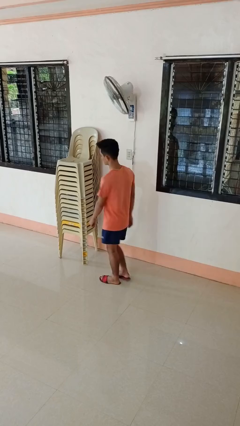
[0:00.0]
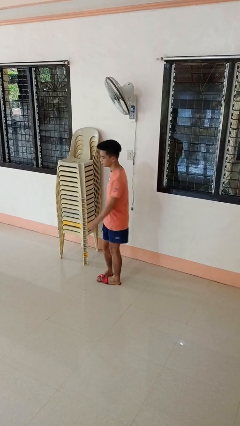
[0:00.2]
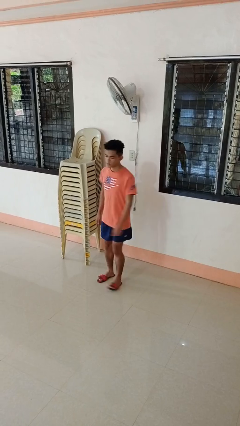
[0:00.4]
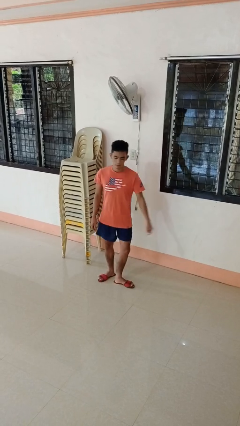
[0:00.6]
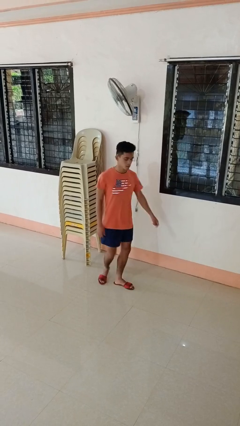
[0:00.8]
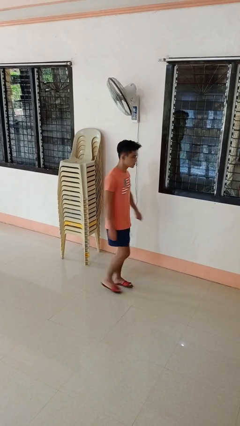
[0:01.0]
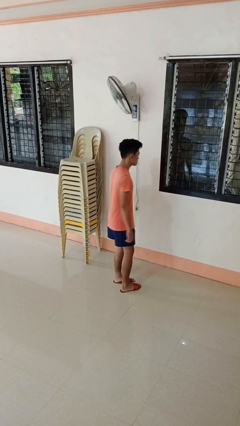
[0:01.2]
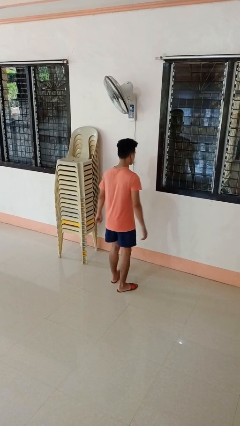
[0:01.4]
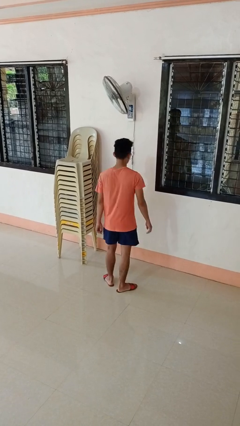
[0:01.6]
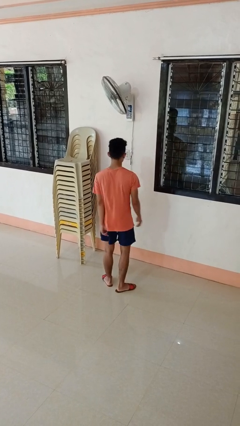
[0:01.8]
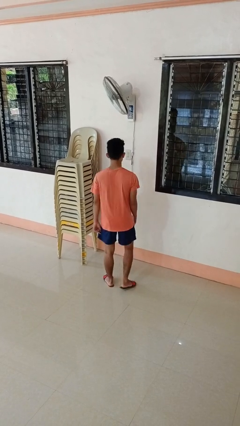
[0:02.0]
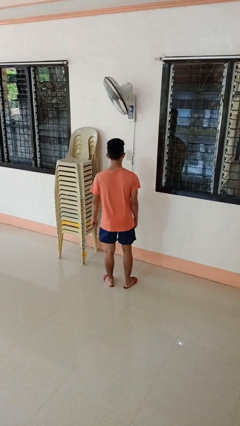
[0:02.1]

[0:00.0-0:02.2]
person twirls

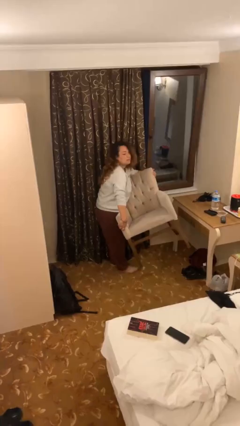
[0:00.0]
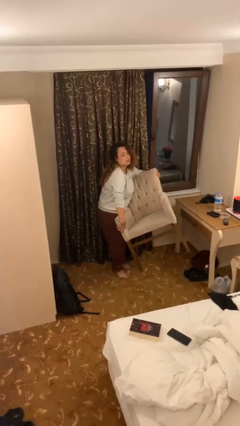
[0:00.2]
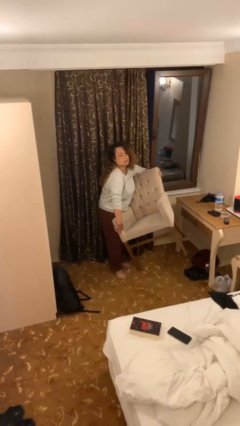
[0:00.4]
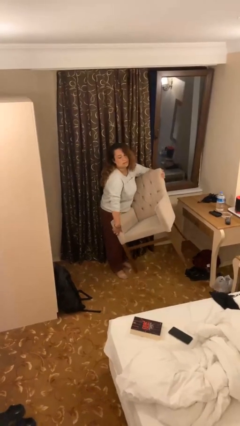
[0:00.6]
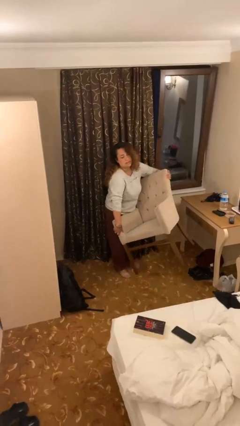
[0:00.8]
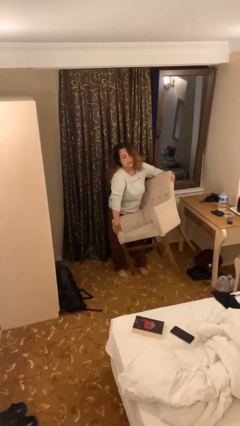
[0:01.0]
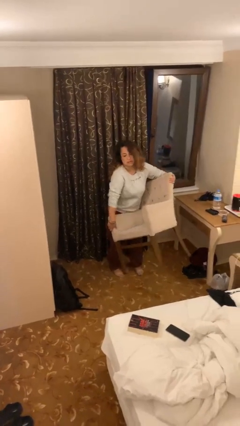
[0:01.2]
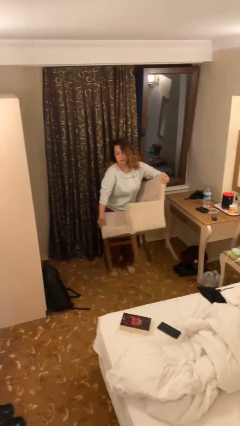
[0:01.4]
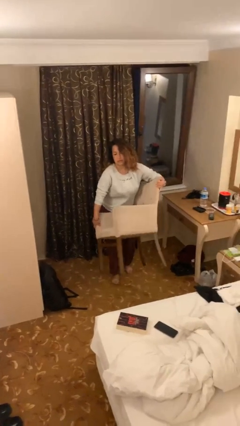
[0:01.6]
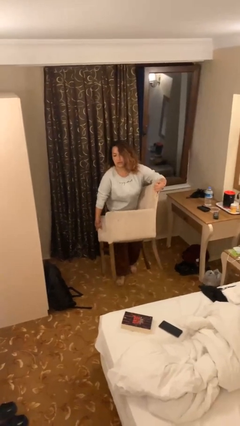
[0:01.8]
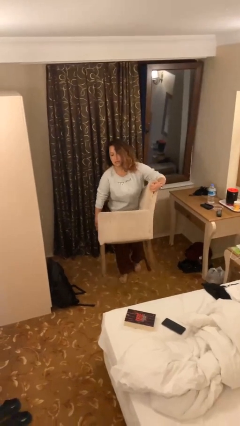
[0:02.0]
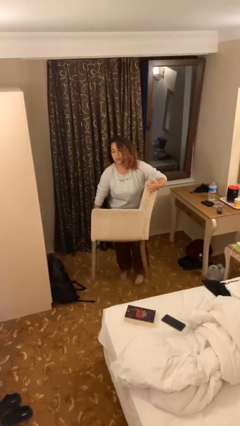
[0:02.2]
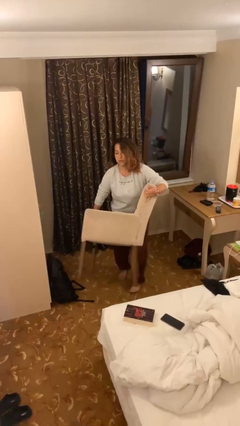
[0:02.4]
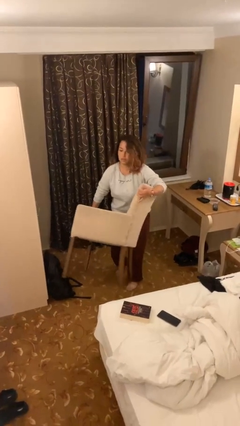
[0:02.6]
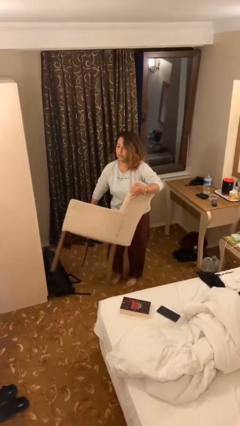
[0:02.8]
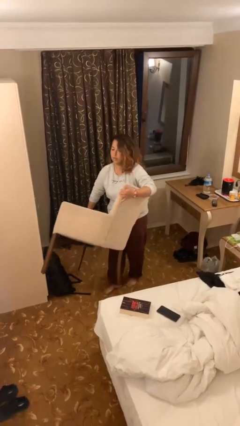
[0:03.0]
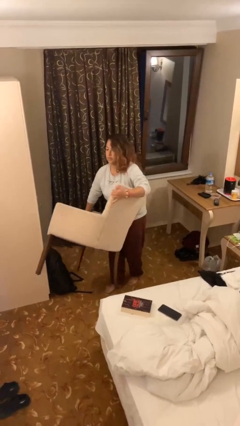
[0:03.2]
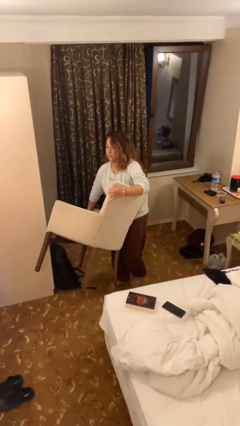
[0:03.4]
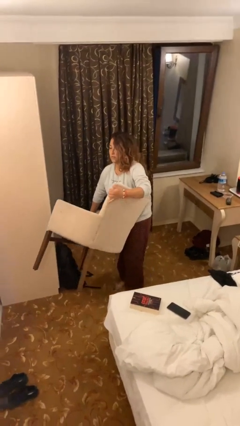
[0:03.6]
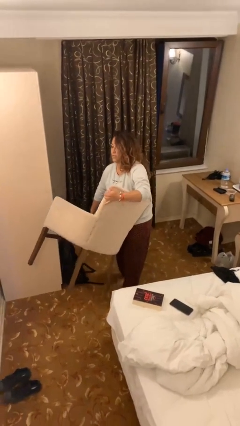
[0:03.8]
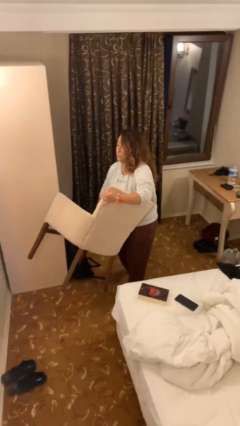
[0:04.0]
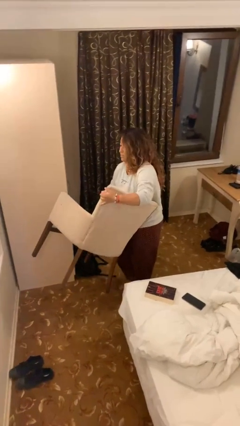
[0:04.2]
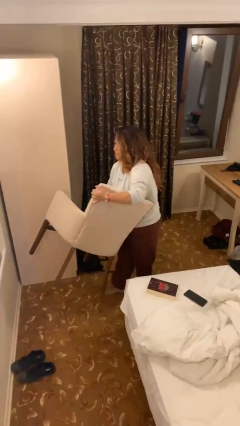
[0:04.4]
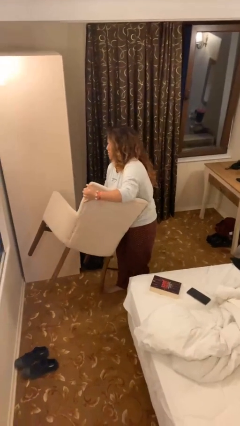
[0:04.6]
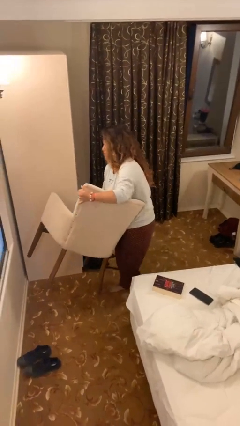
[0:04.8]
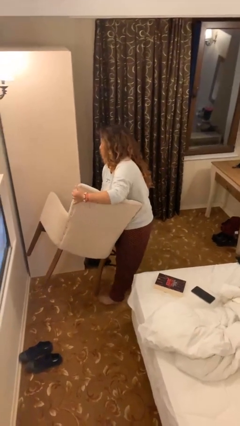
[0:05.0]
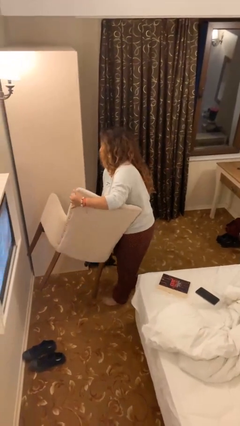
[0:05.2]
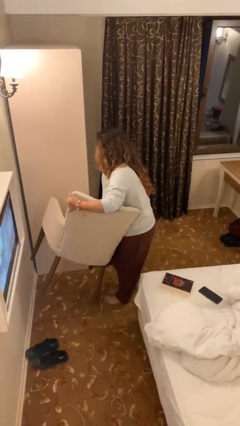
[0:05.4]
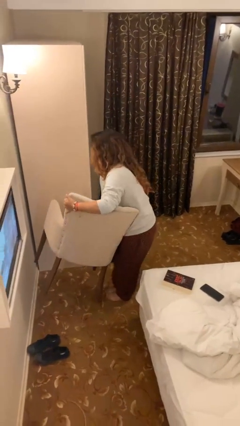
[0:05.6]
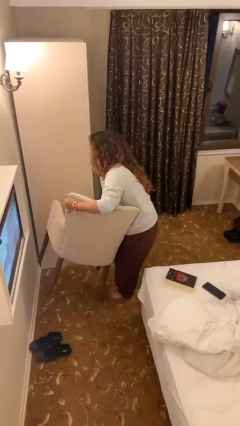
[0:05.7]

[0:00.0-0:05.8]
person carries heavy object

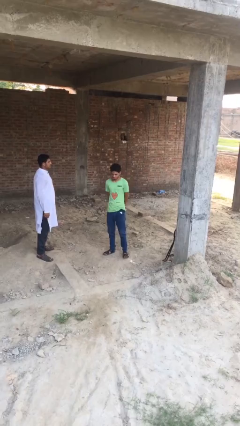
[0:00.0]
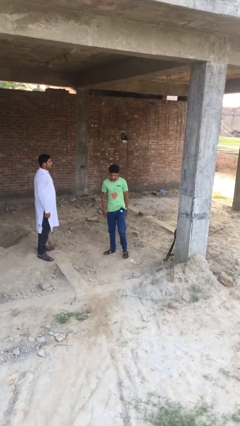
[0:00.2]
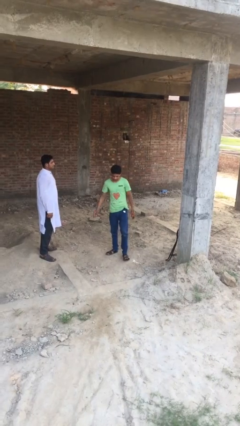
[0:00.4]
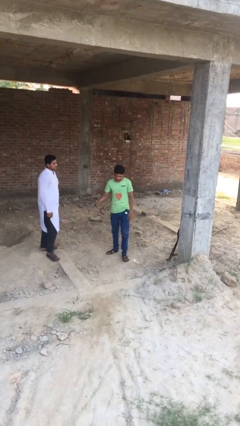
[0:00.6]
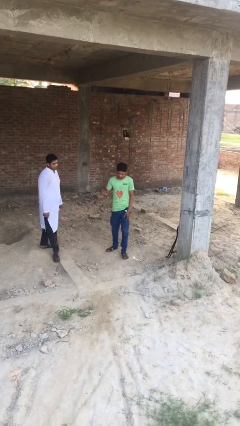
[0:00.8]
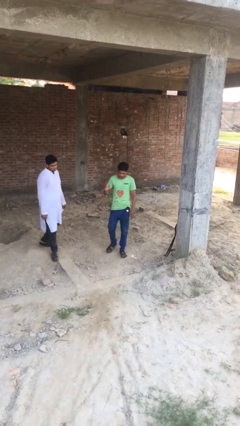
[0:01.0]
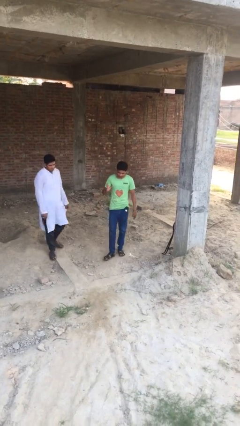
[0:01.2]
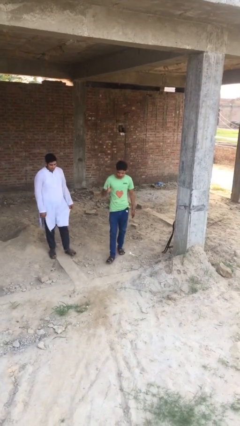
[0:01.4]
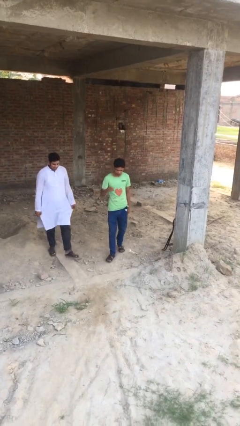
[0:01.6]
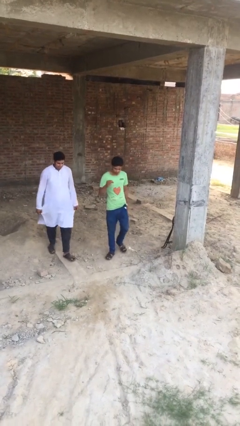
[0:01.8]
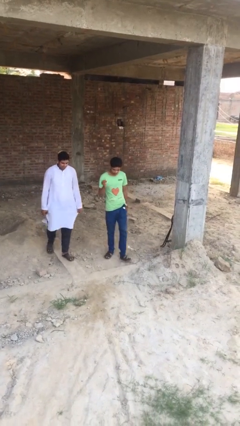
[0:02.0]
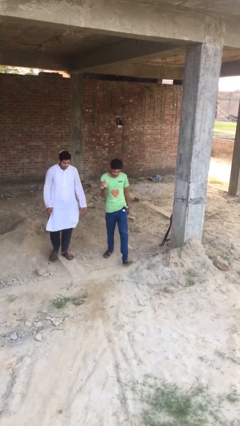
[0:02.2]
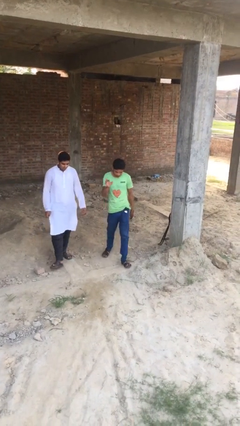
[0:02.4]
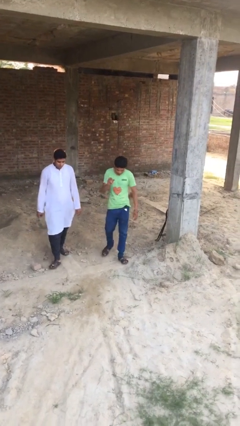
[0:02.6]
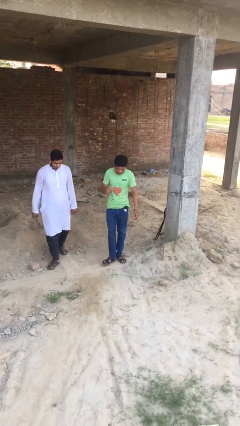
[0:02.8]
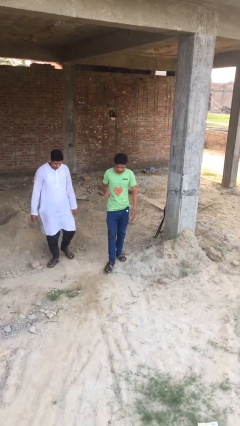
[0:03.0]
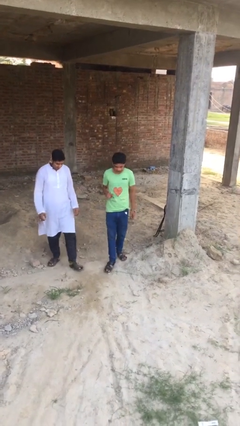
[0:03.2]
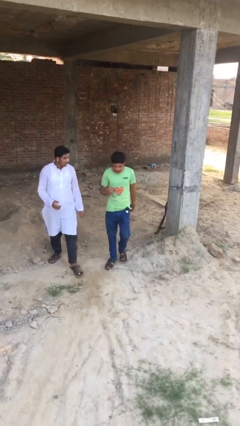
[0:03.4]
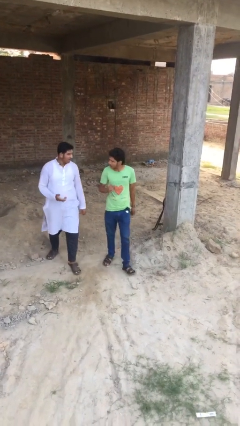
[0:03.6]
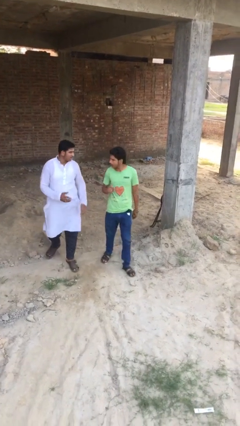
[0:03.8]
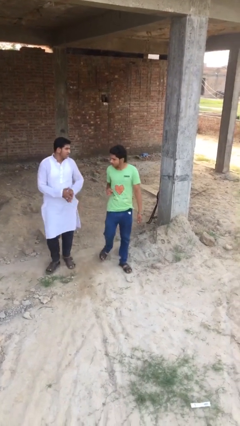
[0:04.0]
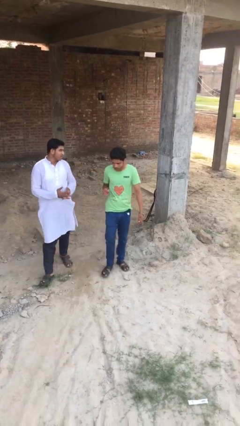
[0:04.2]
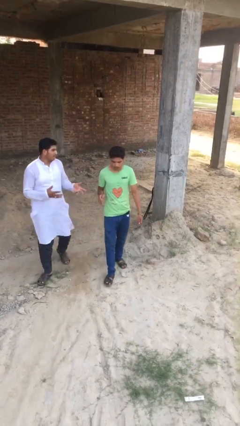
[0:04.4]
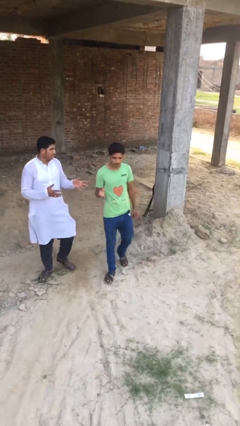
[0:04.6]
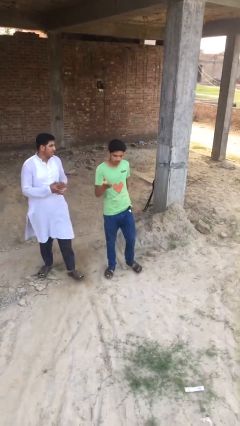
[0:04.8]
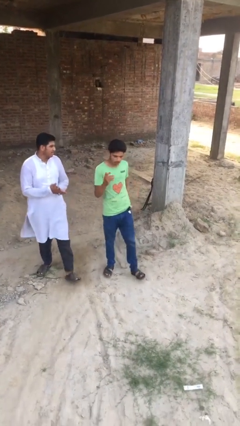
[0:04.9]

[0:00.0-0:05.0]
person talks to person

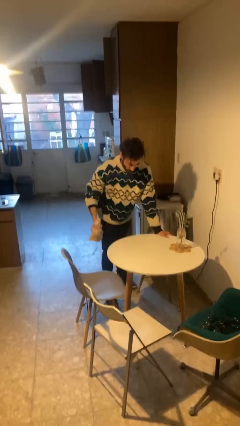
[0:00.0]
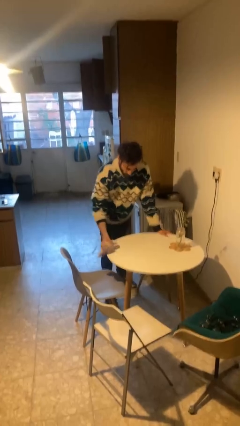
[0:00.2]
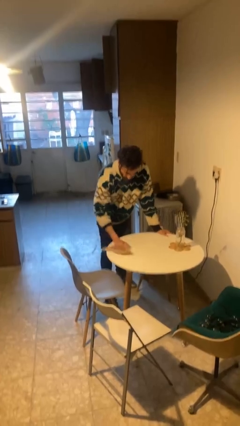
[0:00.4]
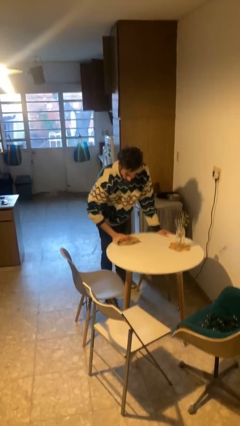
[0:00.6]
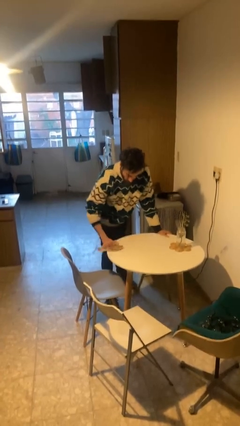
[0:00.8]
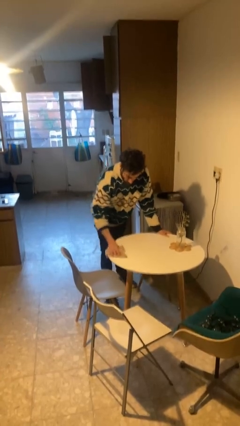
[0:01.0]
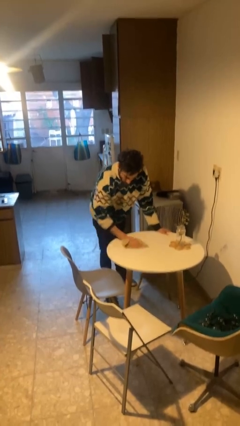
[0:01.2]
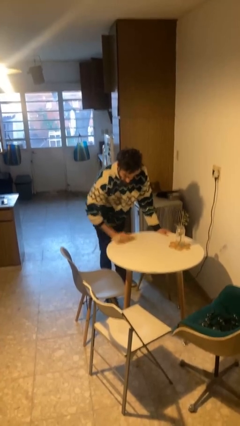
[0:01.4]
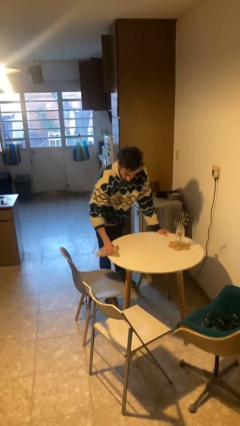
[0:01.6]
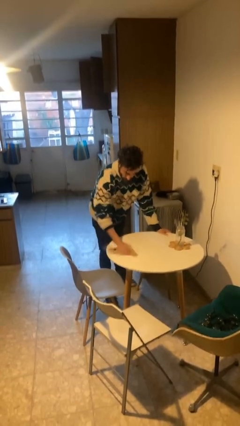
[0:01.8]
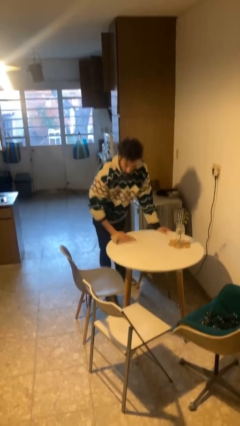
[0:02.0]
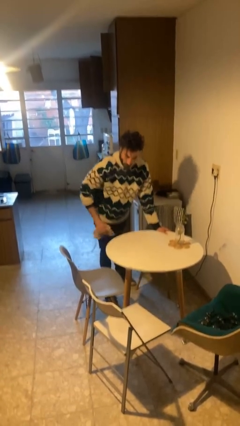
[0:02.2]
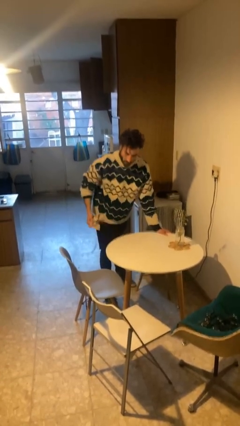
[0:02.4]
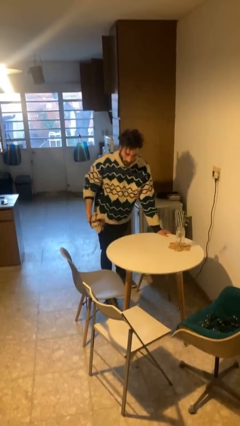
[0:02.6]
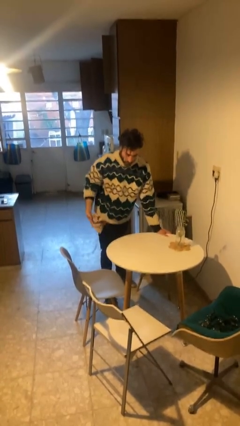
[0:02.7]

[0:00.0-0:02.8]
person cleans table with rag

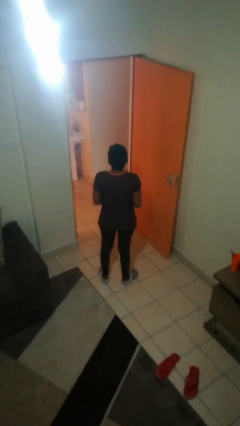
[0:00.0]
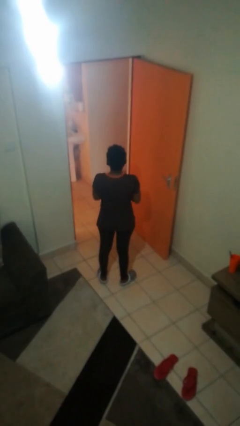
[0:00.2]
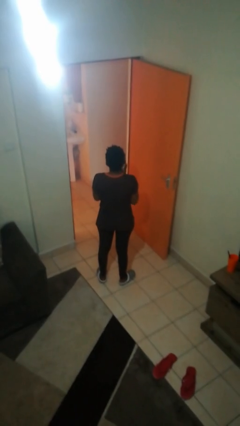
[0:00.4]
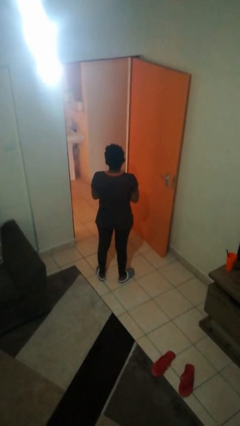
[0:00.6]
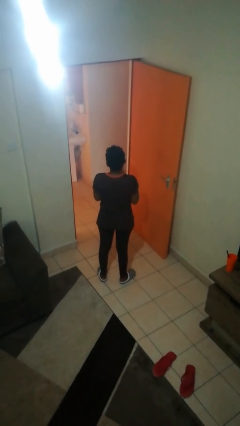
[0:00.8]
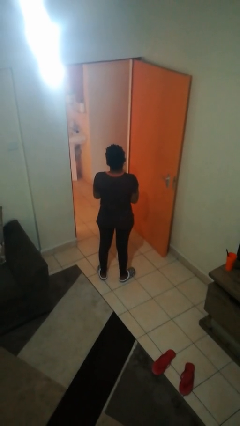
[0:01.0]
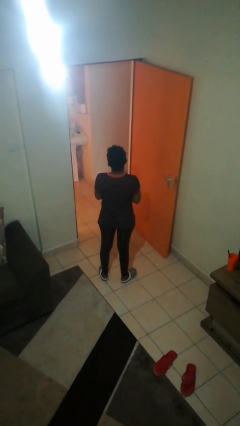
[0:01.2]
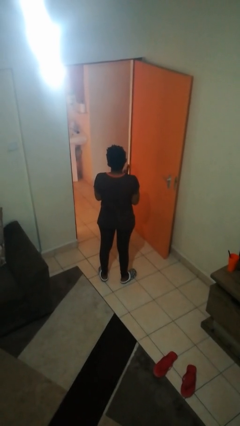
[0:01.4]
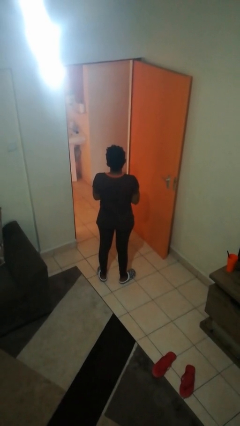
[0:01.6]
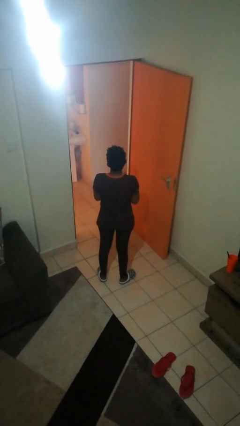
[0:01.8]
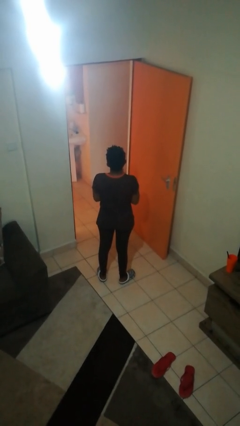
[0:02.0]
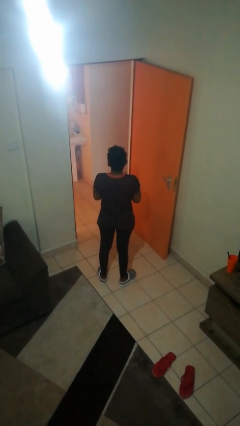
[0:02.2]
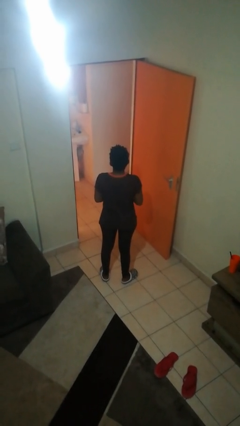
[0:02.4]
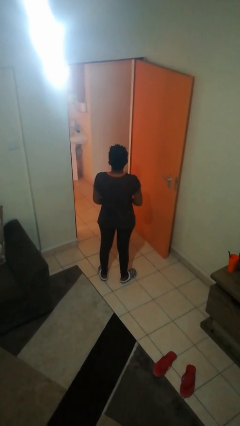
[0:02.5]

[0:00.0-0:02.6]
person claps hands
